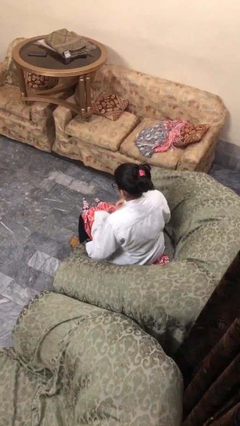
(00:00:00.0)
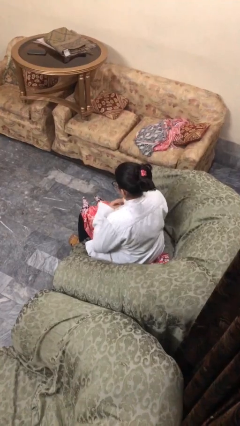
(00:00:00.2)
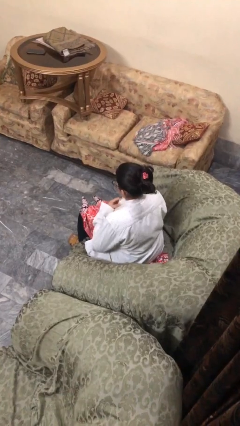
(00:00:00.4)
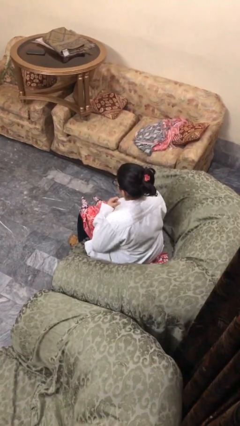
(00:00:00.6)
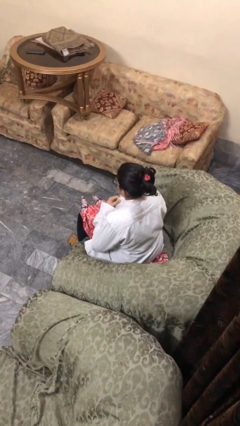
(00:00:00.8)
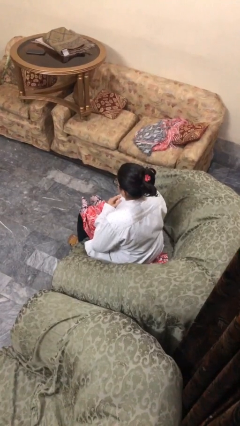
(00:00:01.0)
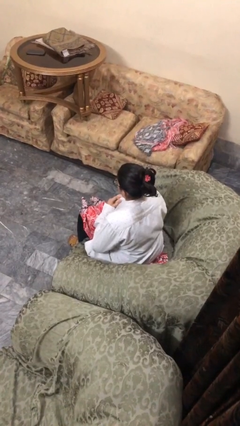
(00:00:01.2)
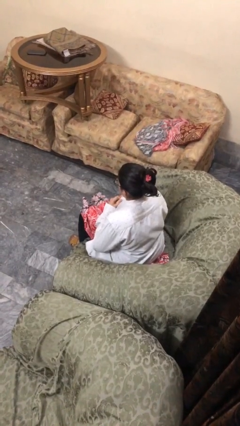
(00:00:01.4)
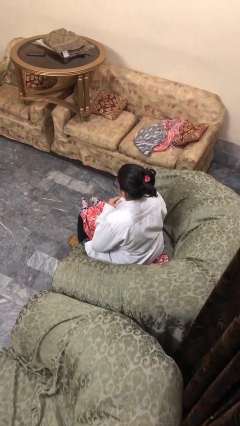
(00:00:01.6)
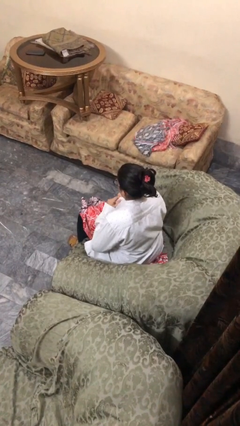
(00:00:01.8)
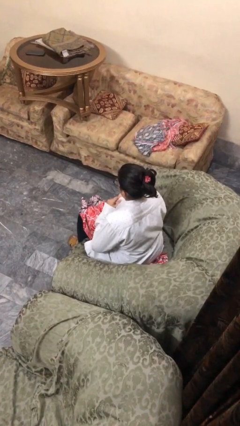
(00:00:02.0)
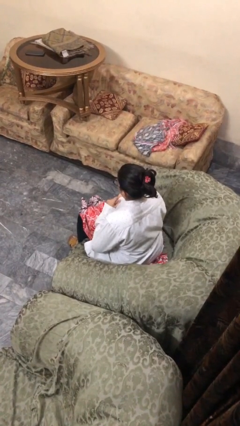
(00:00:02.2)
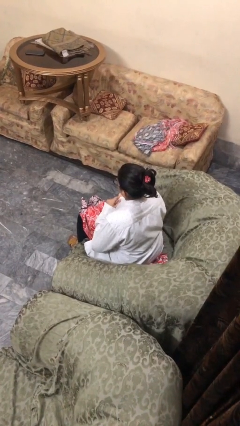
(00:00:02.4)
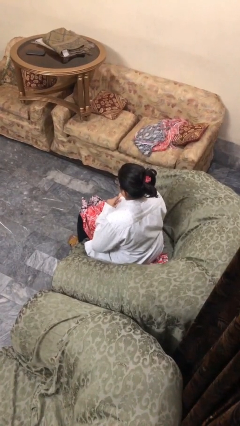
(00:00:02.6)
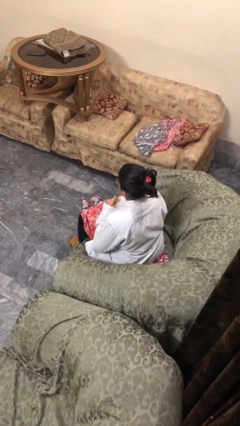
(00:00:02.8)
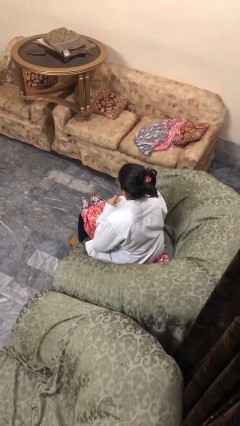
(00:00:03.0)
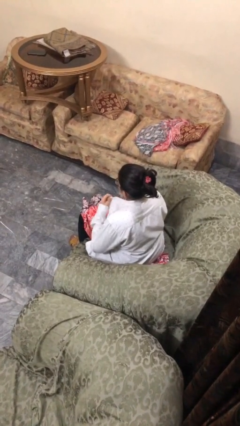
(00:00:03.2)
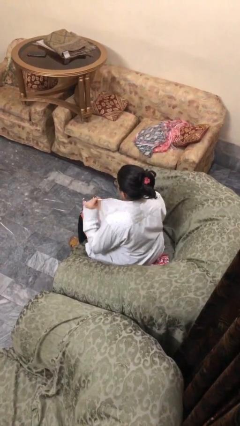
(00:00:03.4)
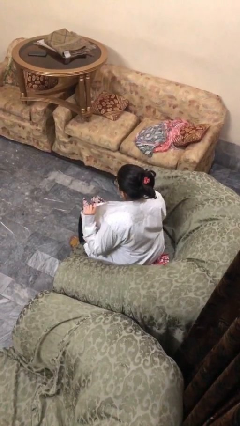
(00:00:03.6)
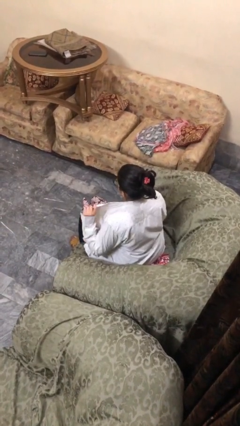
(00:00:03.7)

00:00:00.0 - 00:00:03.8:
person unbuttons shirt

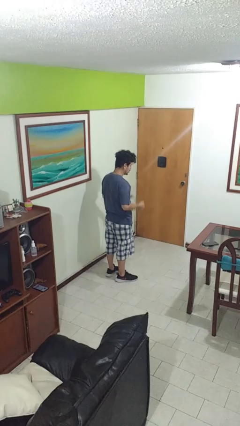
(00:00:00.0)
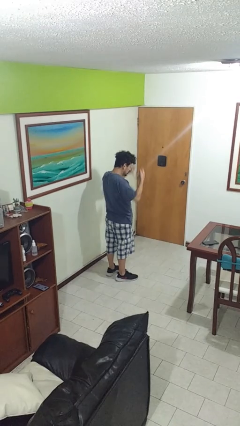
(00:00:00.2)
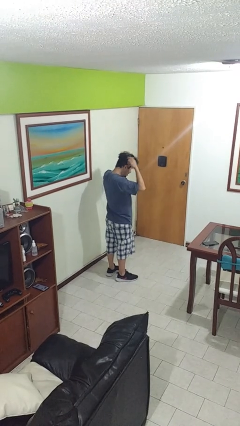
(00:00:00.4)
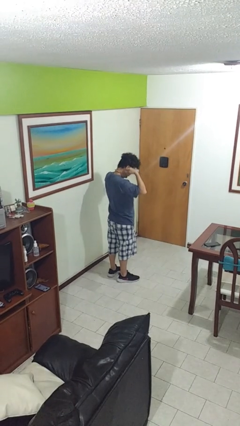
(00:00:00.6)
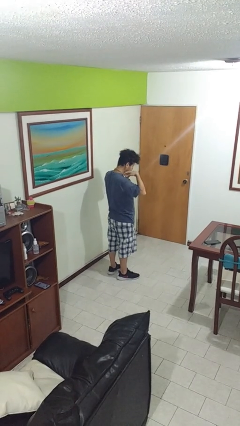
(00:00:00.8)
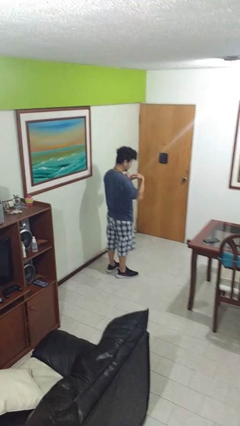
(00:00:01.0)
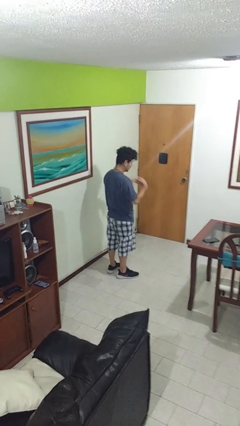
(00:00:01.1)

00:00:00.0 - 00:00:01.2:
person puts on necklace

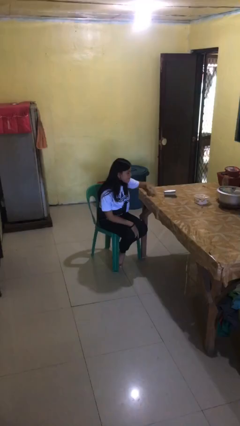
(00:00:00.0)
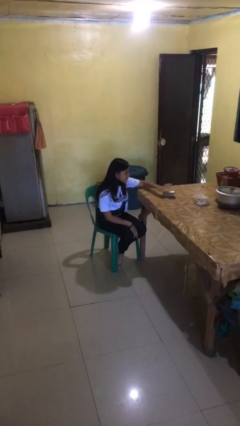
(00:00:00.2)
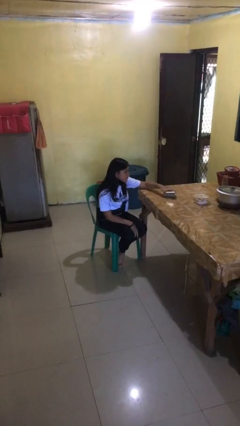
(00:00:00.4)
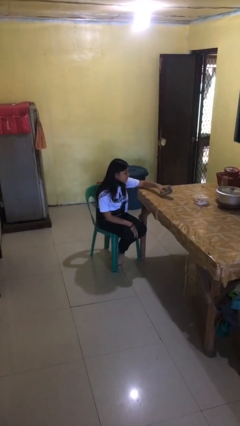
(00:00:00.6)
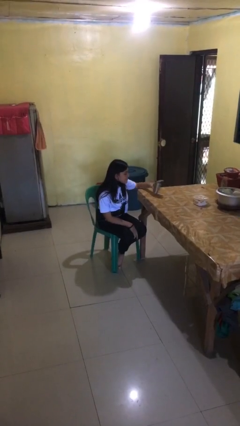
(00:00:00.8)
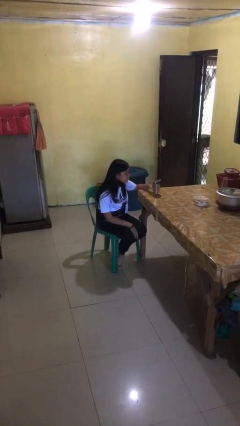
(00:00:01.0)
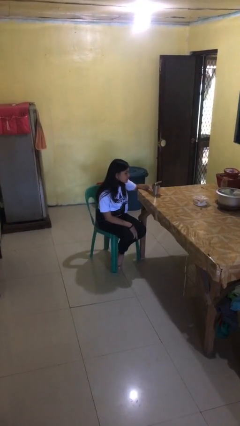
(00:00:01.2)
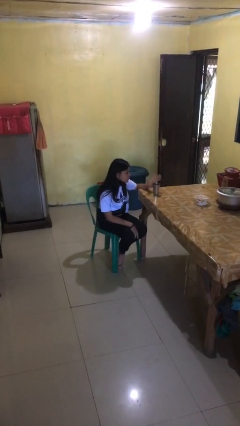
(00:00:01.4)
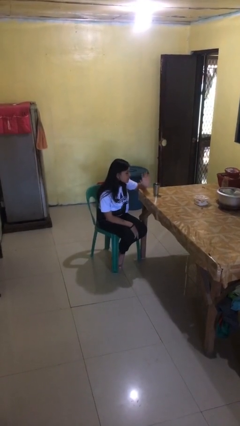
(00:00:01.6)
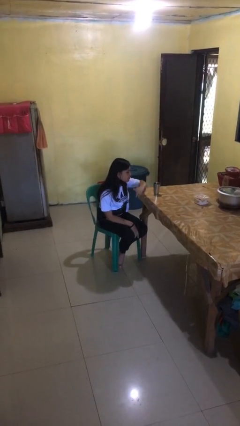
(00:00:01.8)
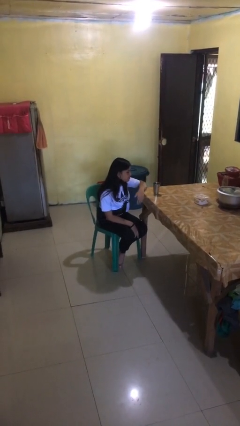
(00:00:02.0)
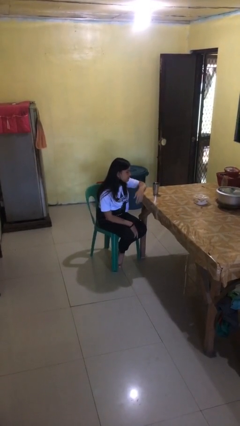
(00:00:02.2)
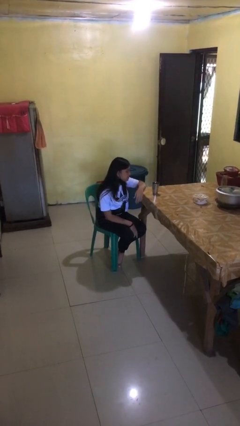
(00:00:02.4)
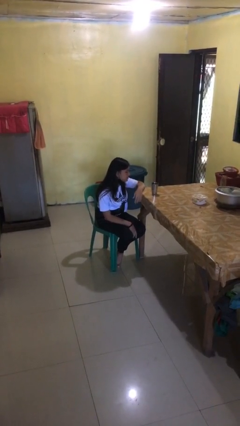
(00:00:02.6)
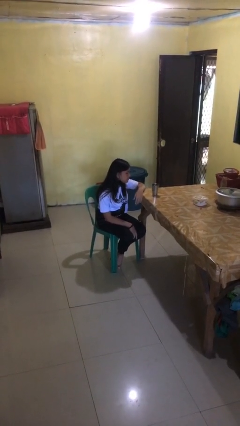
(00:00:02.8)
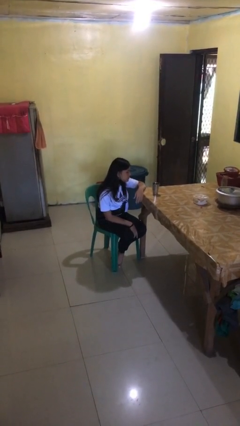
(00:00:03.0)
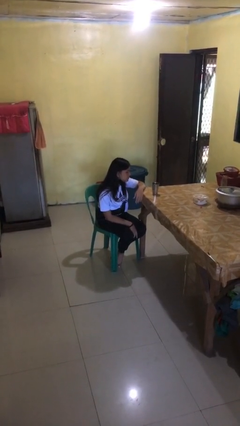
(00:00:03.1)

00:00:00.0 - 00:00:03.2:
person sets upright glass

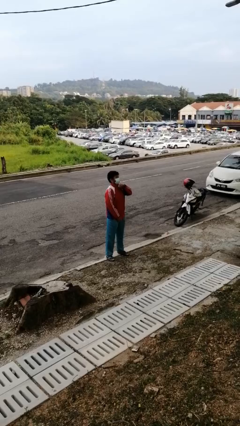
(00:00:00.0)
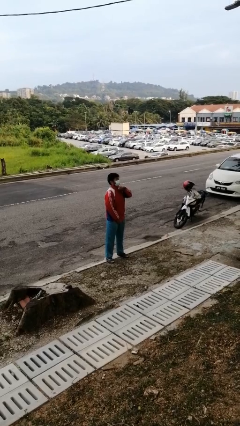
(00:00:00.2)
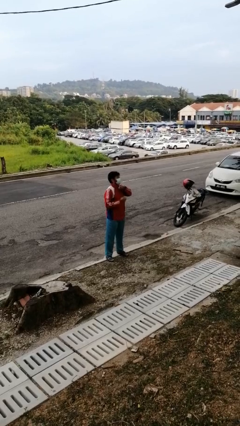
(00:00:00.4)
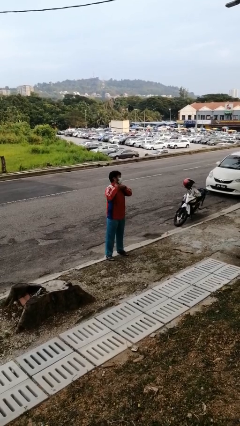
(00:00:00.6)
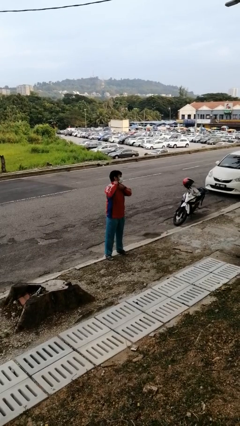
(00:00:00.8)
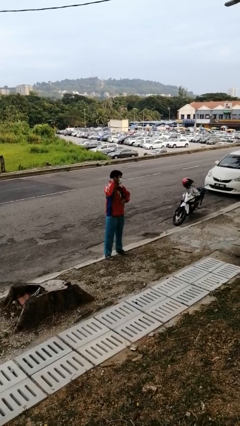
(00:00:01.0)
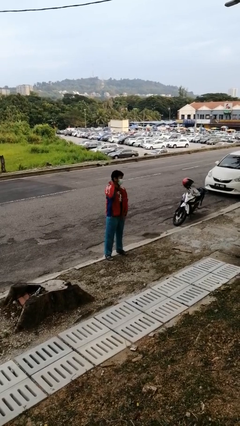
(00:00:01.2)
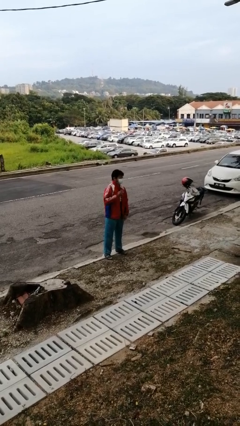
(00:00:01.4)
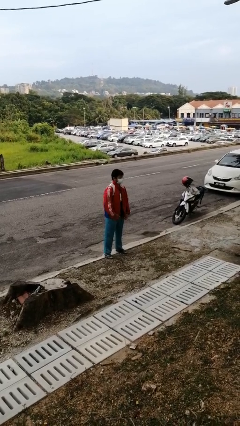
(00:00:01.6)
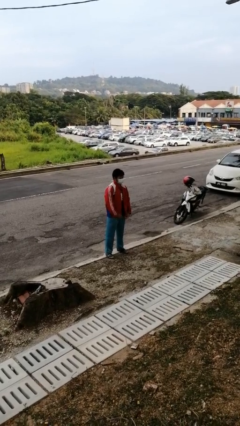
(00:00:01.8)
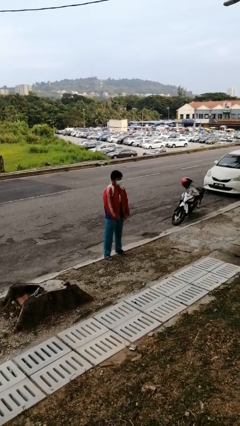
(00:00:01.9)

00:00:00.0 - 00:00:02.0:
person unzips jacket

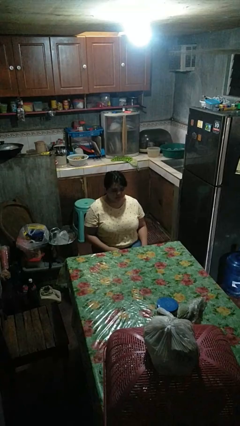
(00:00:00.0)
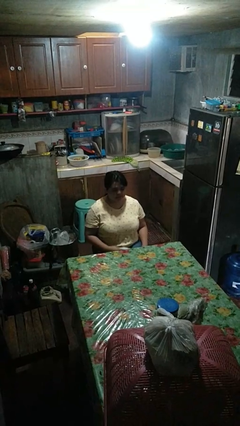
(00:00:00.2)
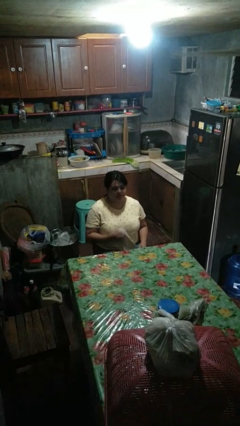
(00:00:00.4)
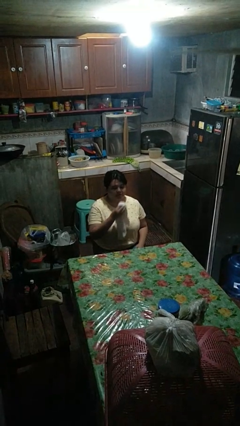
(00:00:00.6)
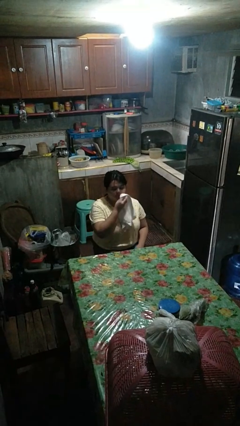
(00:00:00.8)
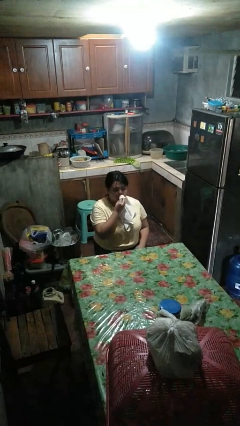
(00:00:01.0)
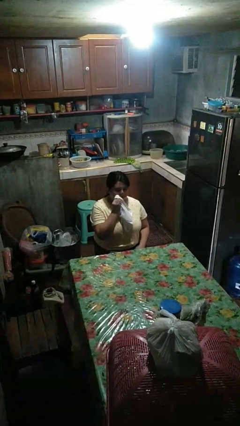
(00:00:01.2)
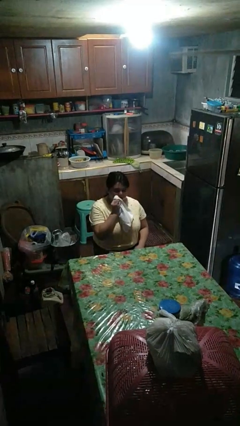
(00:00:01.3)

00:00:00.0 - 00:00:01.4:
person wipes mouth with napkin

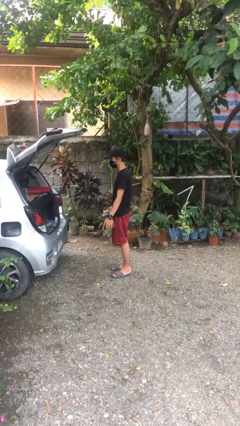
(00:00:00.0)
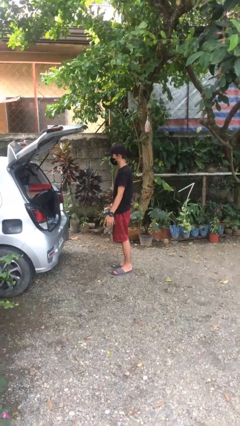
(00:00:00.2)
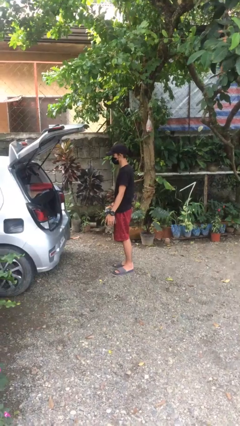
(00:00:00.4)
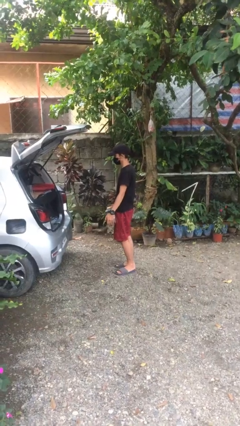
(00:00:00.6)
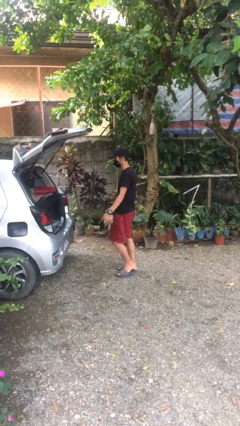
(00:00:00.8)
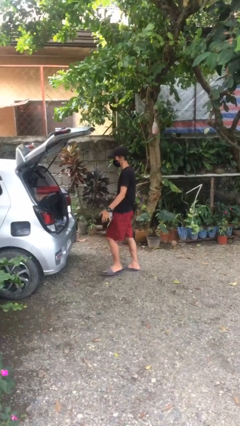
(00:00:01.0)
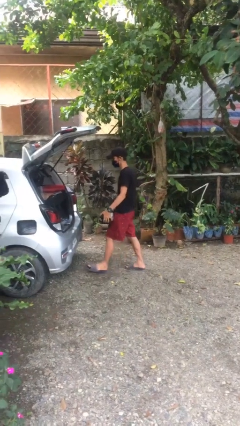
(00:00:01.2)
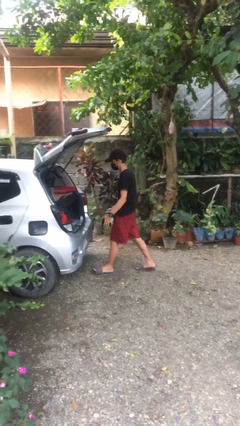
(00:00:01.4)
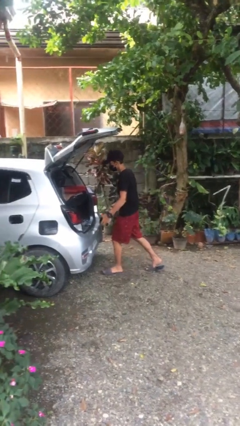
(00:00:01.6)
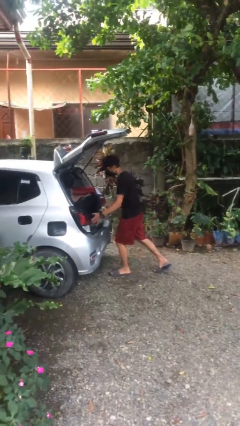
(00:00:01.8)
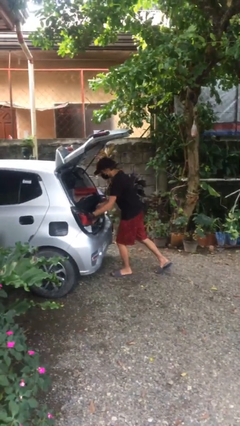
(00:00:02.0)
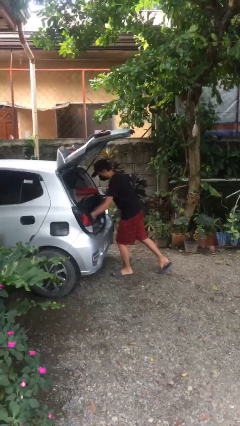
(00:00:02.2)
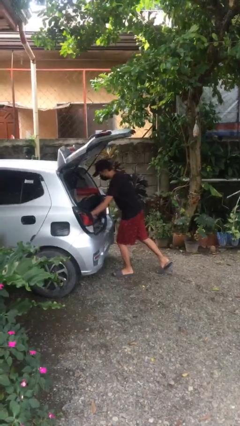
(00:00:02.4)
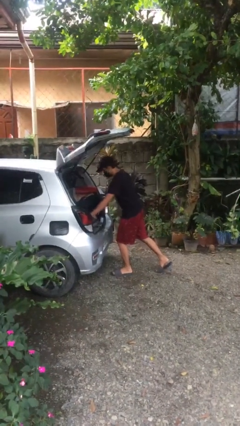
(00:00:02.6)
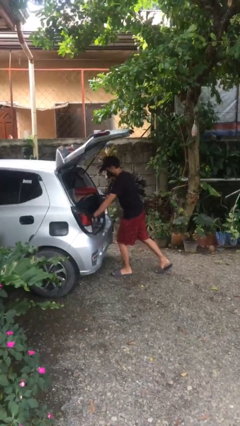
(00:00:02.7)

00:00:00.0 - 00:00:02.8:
person loads car

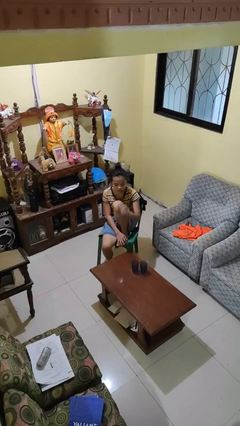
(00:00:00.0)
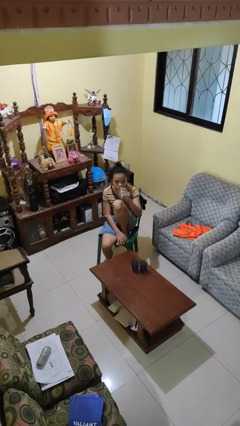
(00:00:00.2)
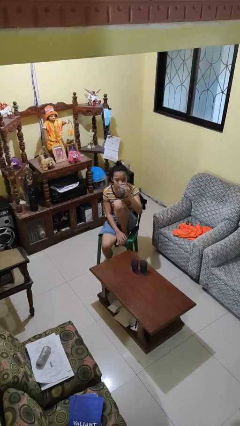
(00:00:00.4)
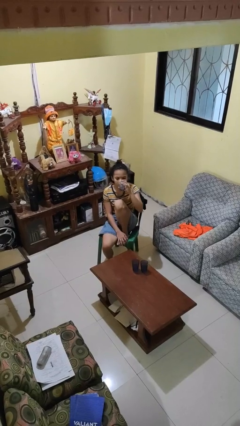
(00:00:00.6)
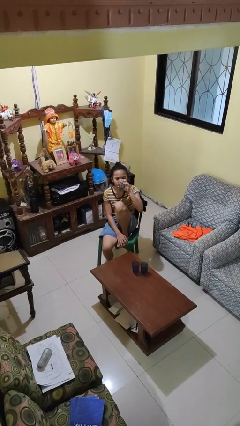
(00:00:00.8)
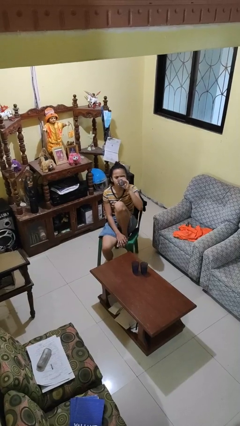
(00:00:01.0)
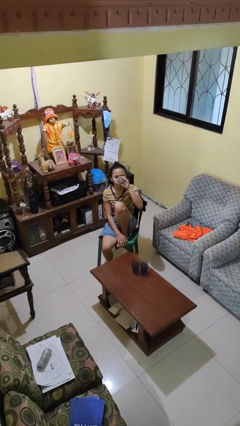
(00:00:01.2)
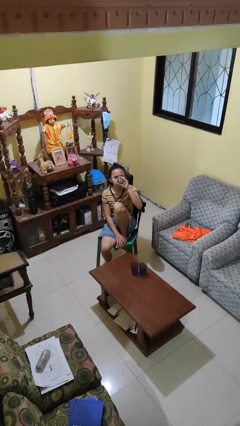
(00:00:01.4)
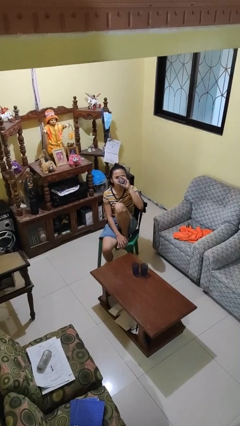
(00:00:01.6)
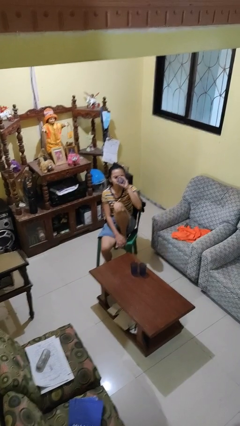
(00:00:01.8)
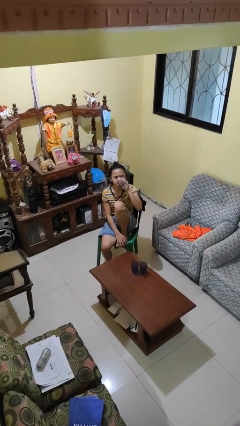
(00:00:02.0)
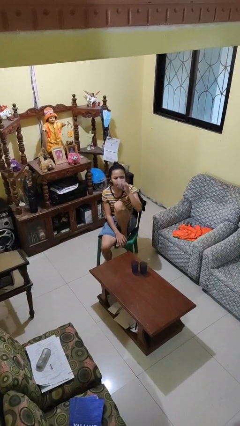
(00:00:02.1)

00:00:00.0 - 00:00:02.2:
person drinks from shotglass

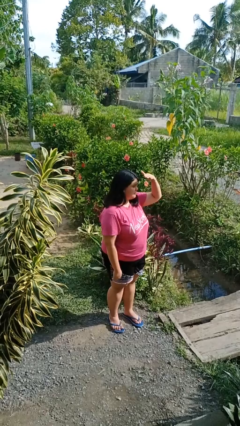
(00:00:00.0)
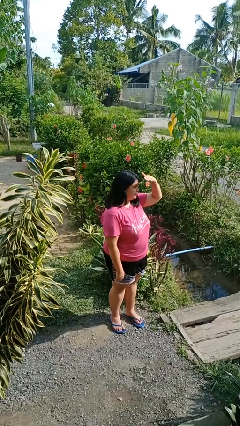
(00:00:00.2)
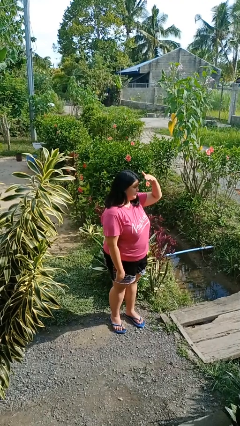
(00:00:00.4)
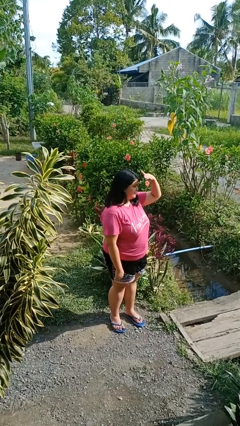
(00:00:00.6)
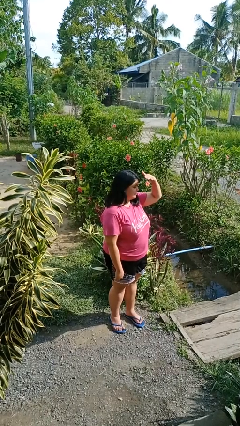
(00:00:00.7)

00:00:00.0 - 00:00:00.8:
person shades eyes
